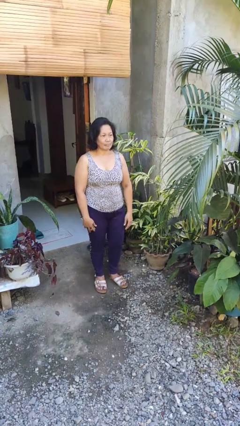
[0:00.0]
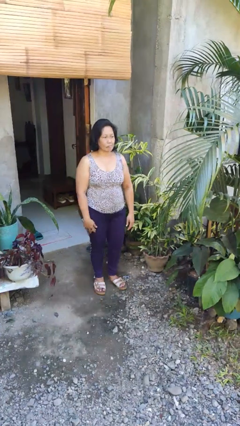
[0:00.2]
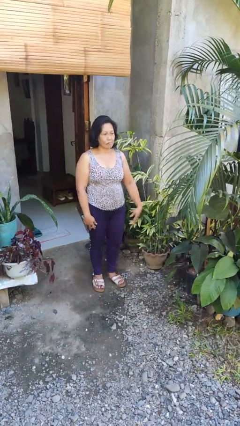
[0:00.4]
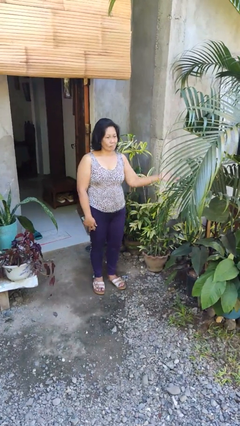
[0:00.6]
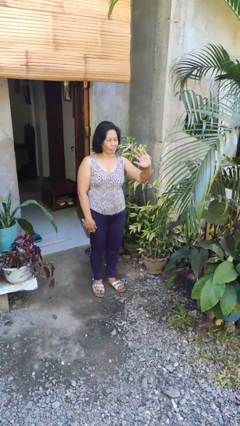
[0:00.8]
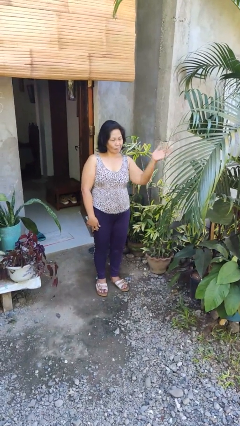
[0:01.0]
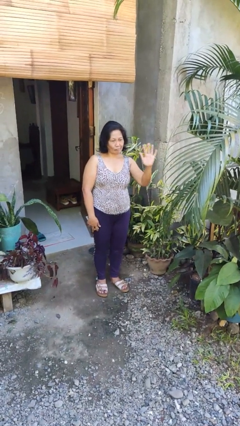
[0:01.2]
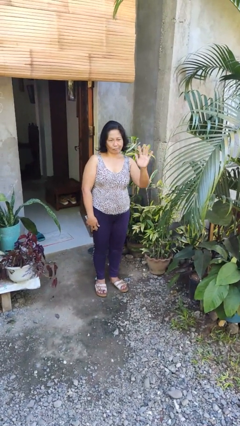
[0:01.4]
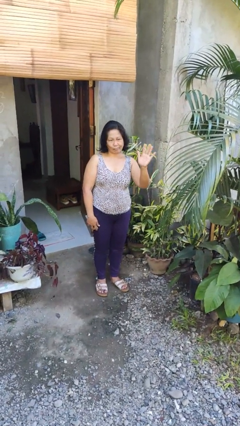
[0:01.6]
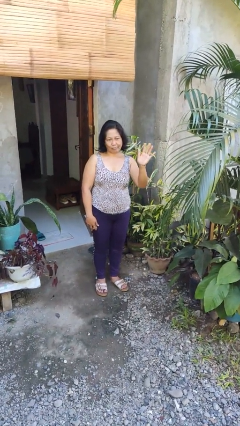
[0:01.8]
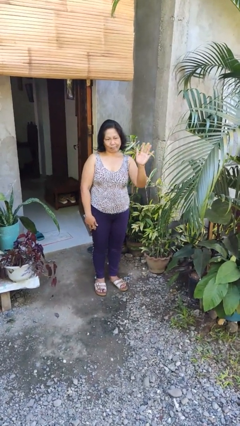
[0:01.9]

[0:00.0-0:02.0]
person waves at person

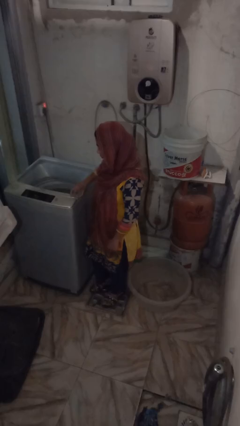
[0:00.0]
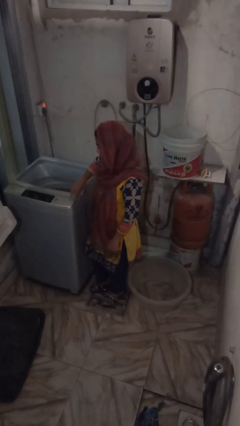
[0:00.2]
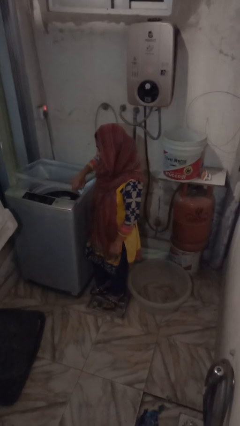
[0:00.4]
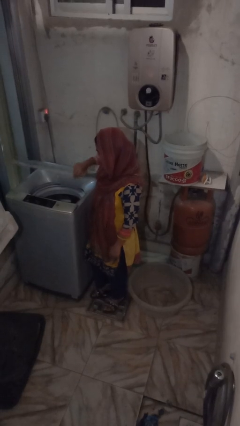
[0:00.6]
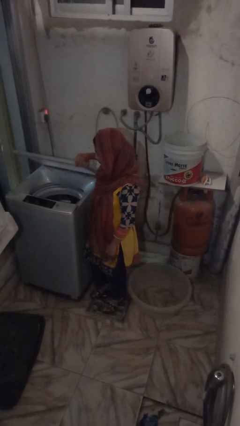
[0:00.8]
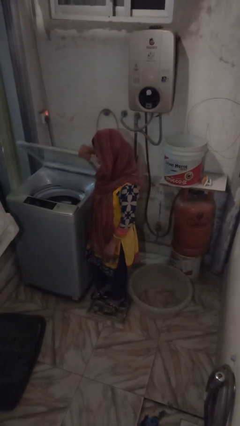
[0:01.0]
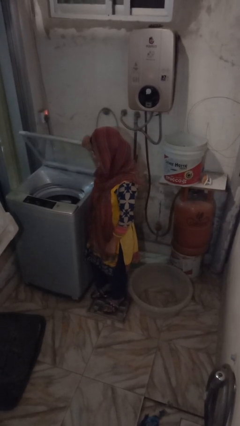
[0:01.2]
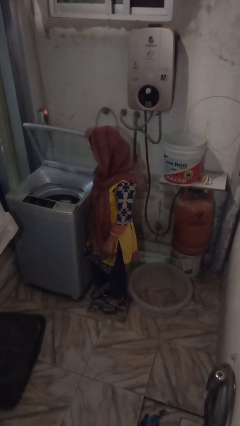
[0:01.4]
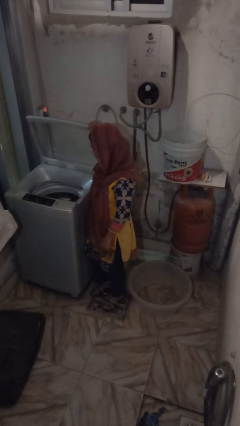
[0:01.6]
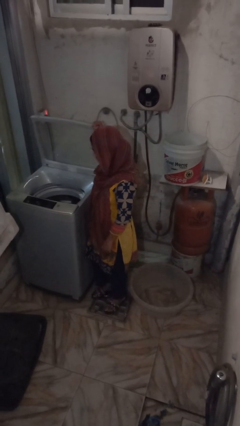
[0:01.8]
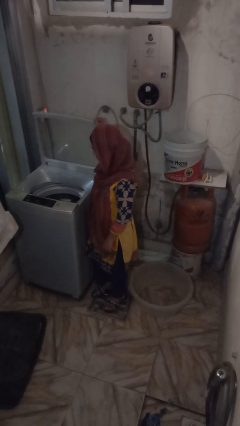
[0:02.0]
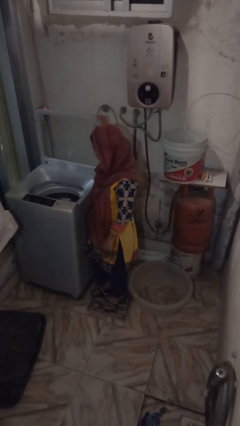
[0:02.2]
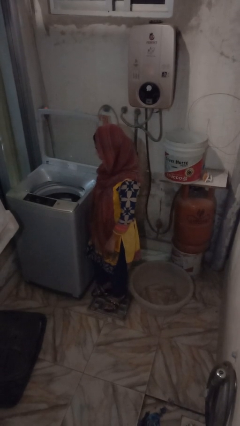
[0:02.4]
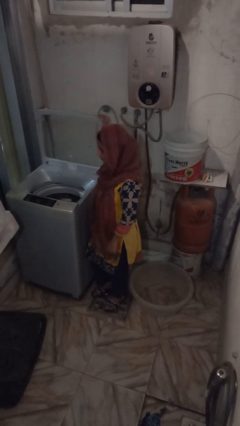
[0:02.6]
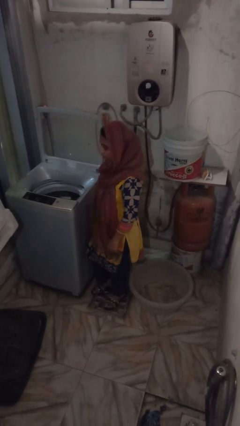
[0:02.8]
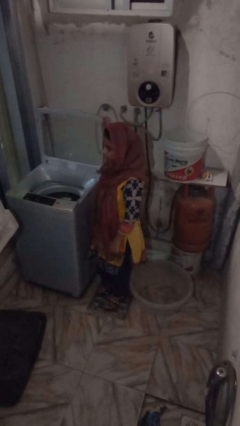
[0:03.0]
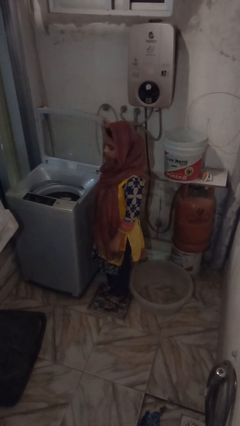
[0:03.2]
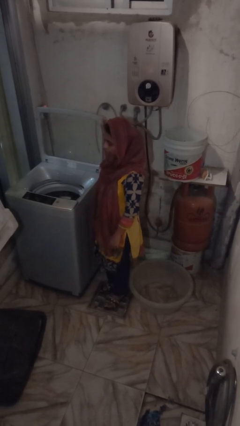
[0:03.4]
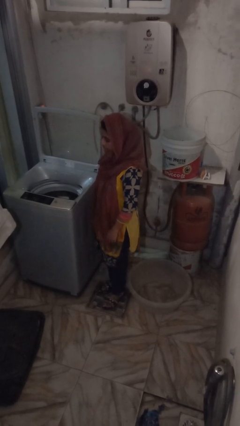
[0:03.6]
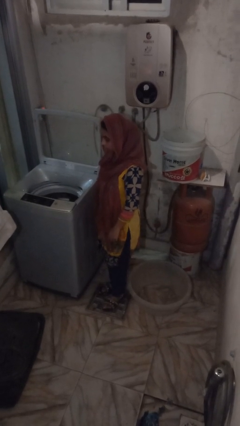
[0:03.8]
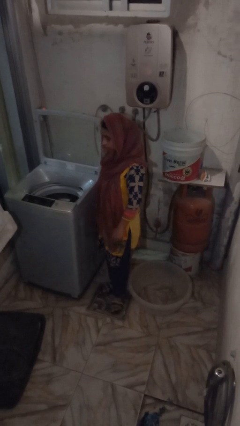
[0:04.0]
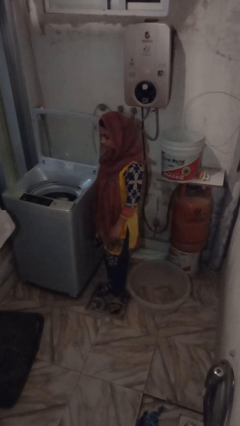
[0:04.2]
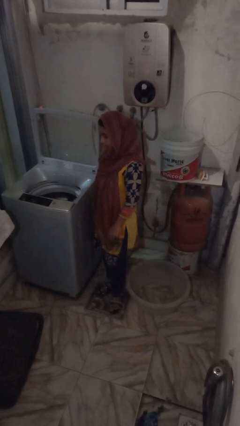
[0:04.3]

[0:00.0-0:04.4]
person opens clothes washer

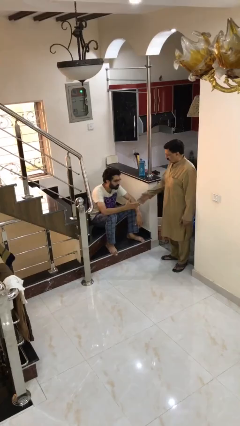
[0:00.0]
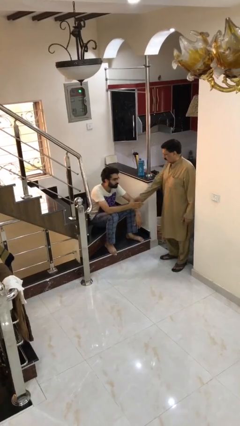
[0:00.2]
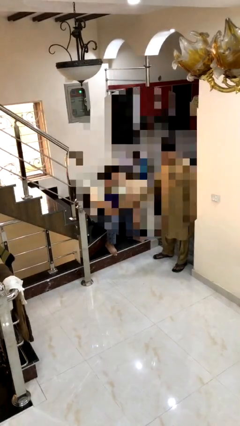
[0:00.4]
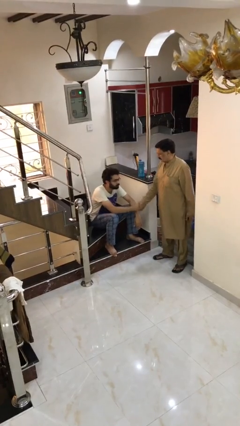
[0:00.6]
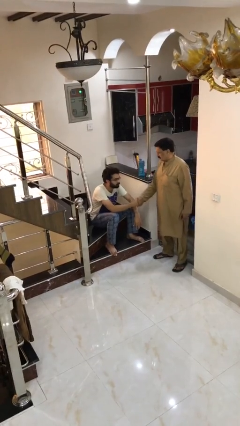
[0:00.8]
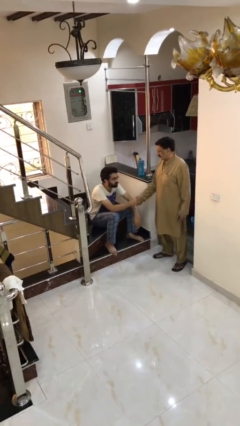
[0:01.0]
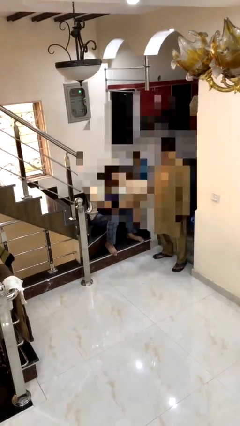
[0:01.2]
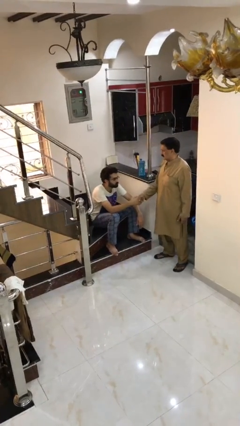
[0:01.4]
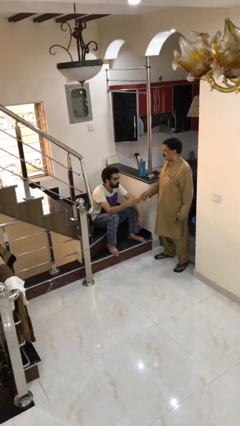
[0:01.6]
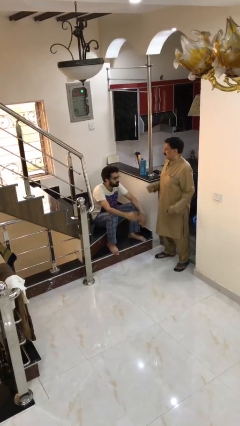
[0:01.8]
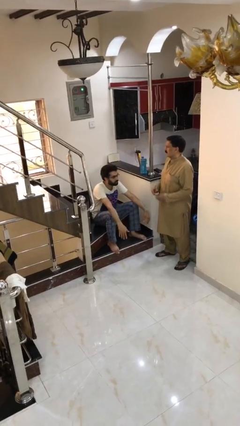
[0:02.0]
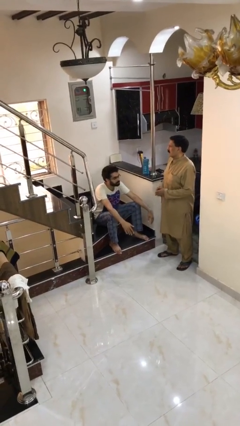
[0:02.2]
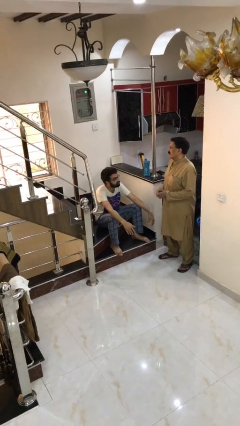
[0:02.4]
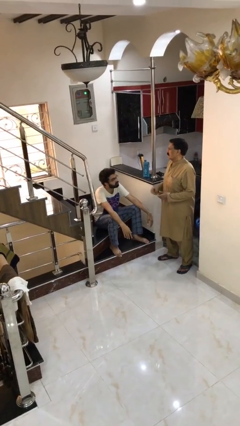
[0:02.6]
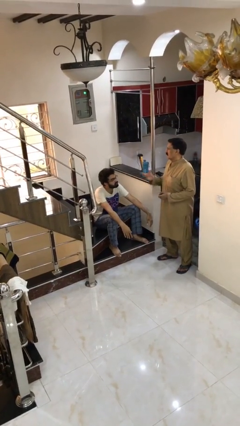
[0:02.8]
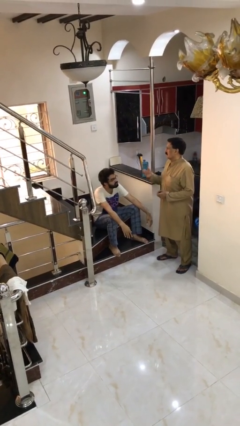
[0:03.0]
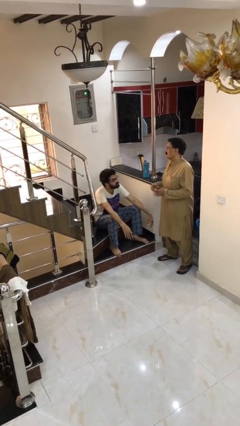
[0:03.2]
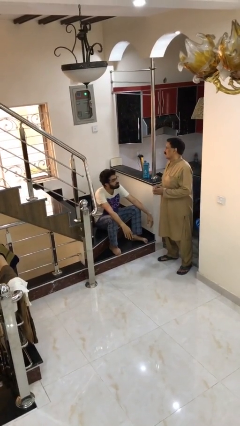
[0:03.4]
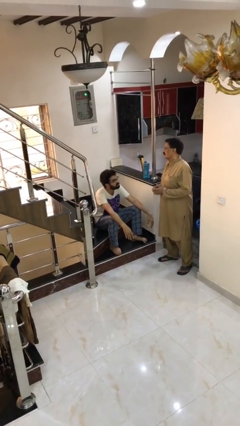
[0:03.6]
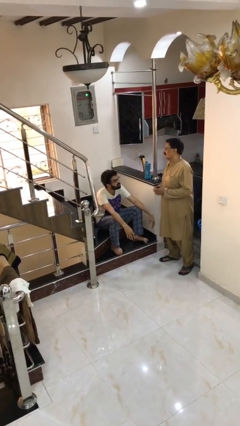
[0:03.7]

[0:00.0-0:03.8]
person shakes hand

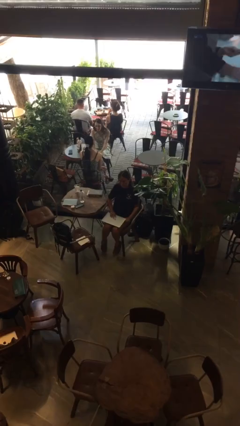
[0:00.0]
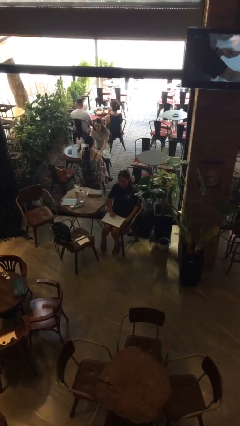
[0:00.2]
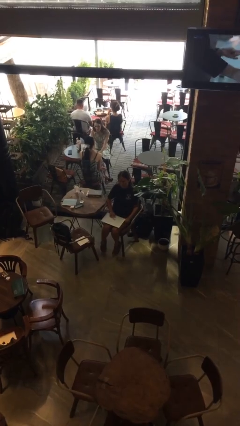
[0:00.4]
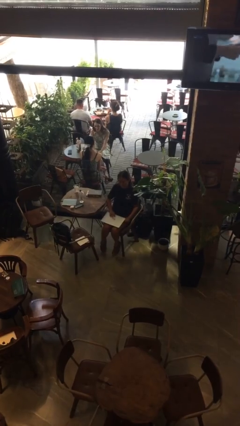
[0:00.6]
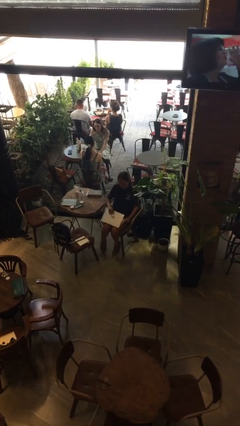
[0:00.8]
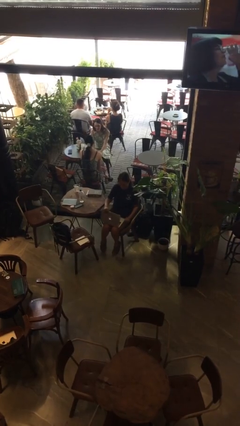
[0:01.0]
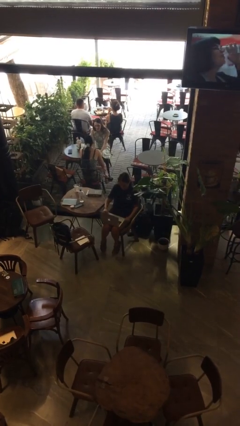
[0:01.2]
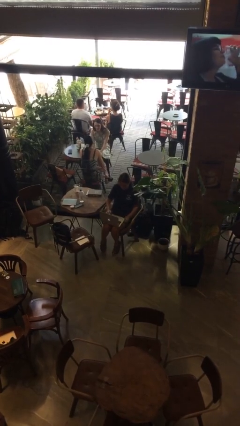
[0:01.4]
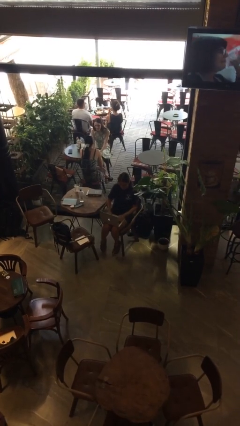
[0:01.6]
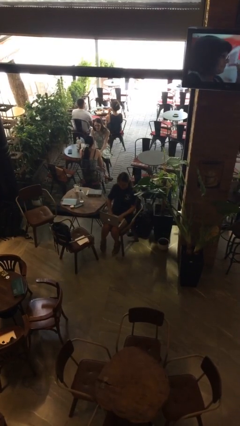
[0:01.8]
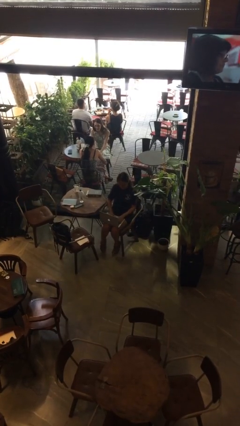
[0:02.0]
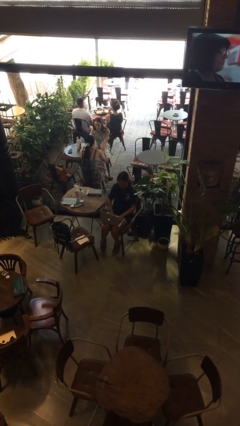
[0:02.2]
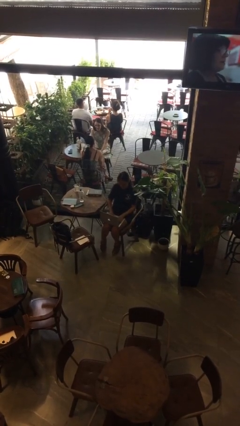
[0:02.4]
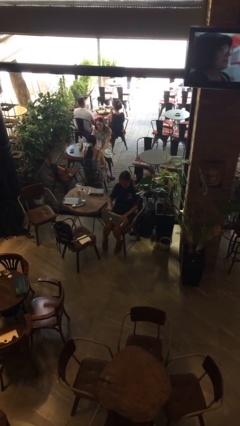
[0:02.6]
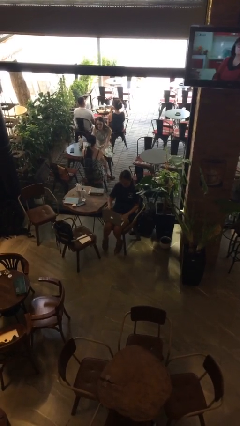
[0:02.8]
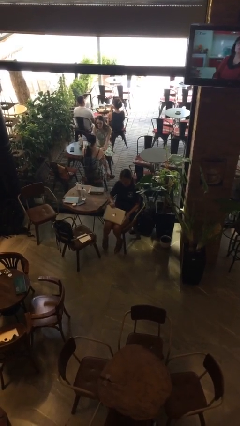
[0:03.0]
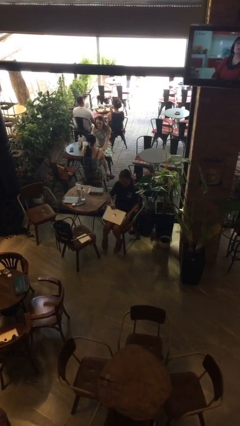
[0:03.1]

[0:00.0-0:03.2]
person opens laptop

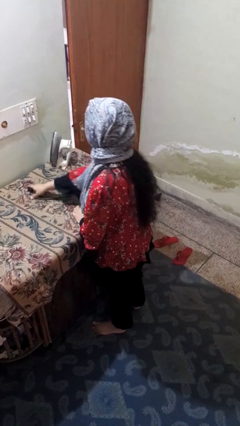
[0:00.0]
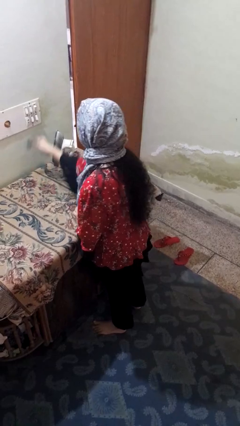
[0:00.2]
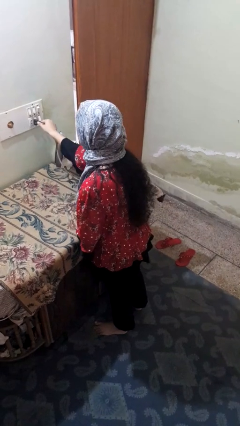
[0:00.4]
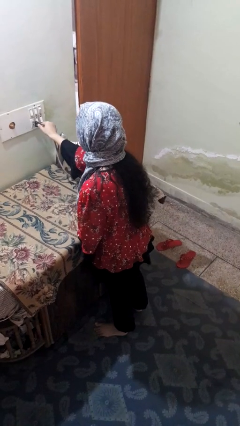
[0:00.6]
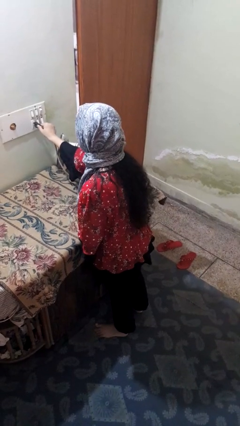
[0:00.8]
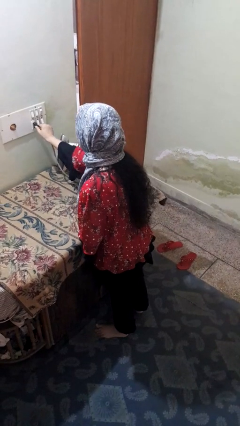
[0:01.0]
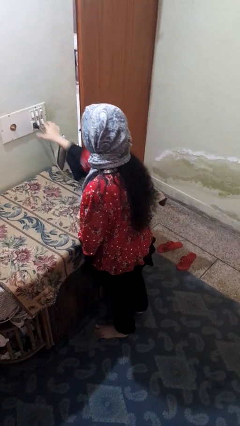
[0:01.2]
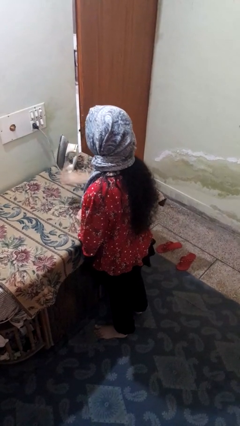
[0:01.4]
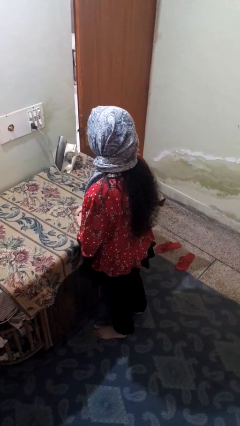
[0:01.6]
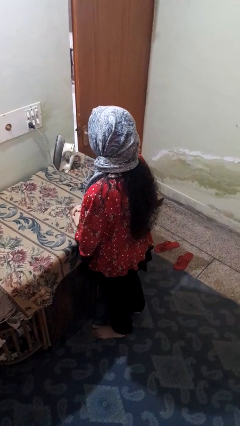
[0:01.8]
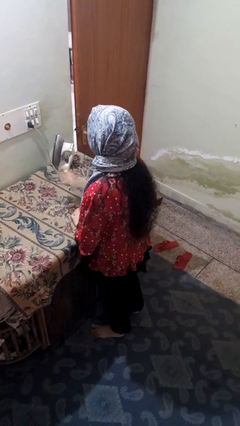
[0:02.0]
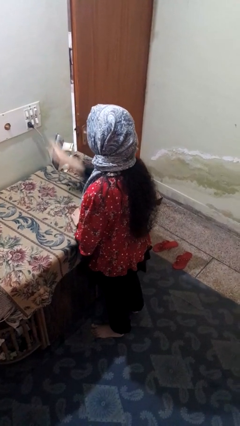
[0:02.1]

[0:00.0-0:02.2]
person plugs into electrical socket

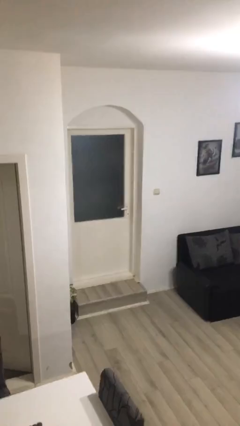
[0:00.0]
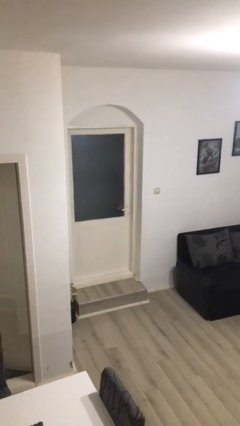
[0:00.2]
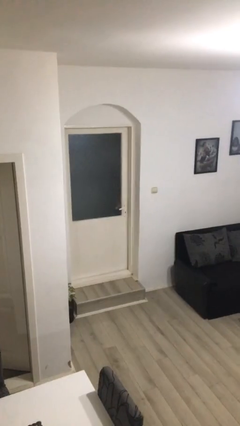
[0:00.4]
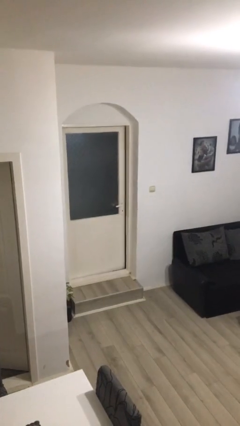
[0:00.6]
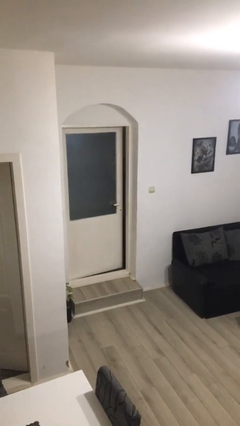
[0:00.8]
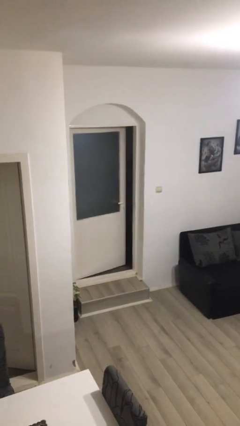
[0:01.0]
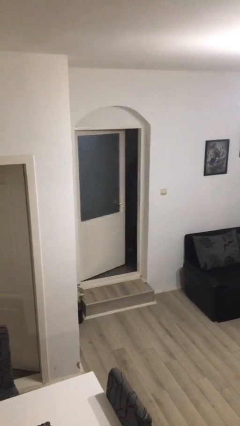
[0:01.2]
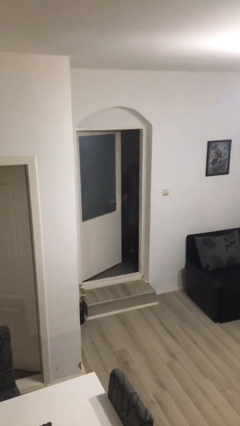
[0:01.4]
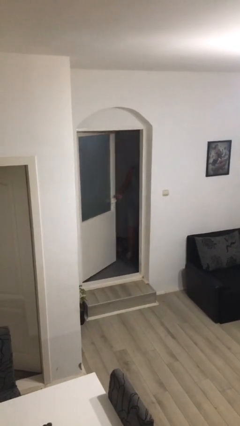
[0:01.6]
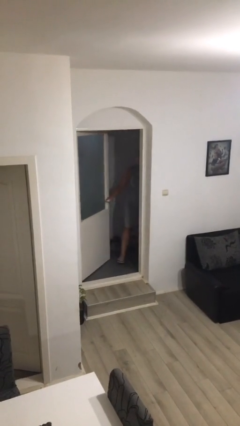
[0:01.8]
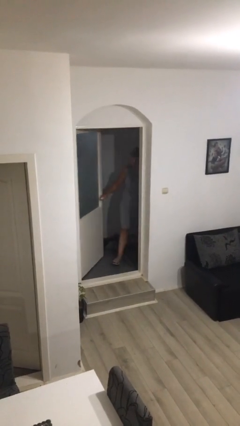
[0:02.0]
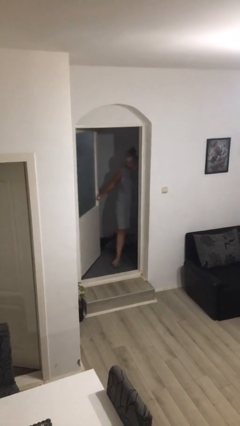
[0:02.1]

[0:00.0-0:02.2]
person opens facility door
